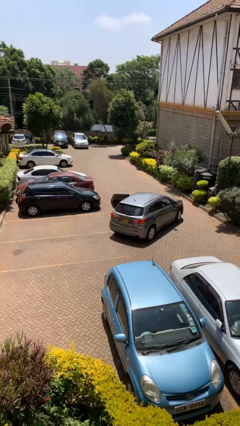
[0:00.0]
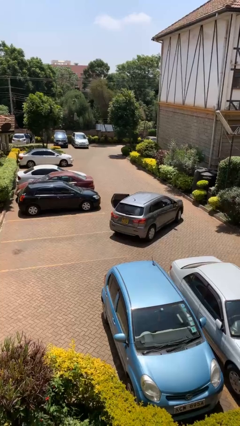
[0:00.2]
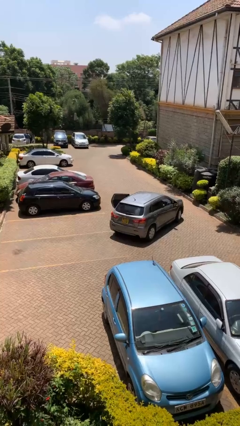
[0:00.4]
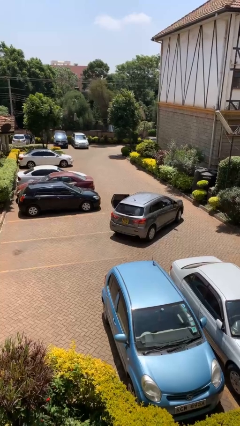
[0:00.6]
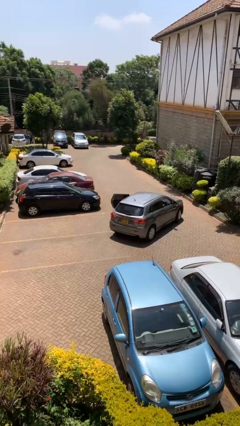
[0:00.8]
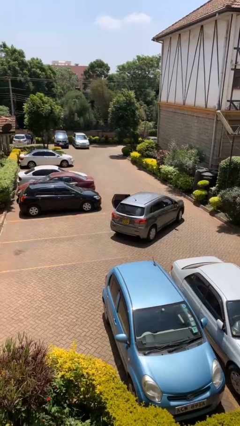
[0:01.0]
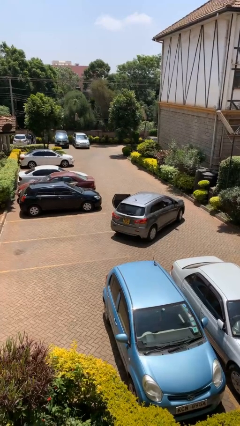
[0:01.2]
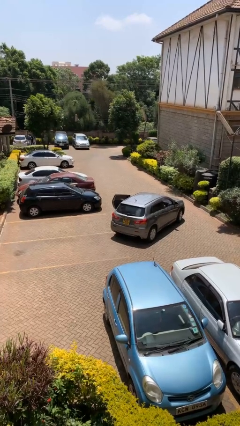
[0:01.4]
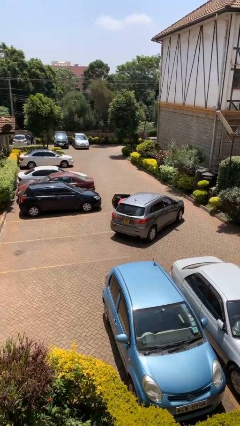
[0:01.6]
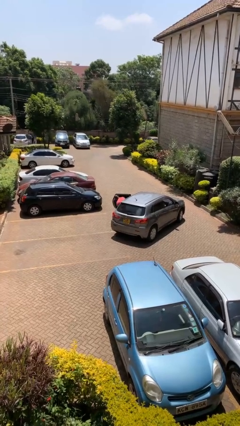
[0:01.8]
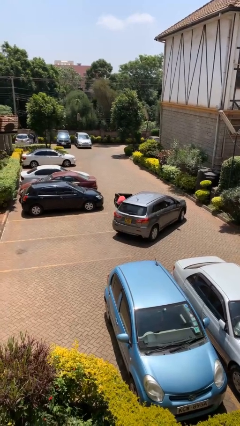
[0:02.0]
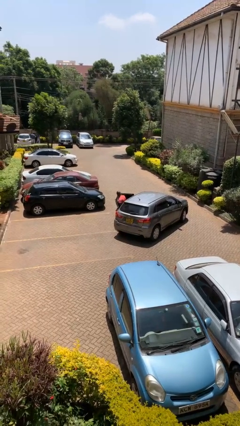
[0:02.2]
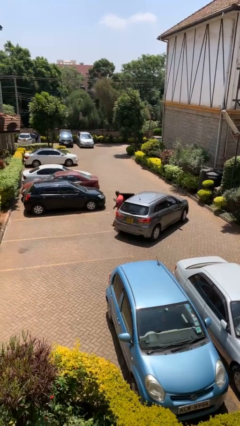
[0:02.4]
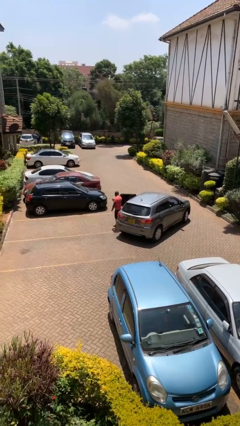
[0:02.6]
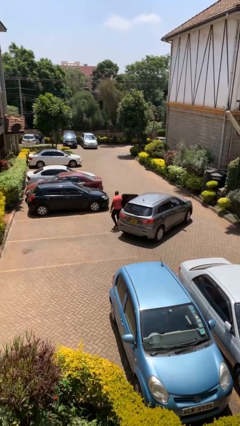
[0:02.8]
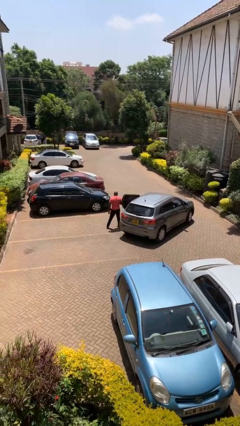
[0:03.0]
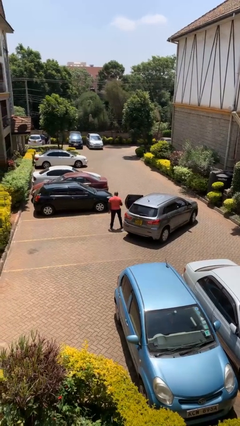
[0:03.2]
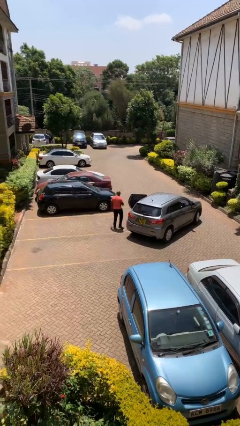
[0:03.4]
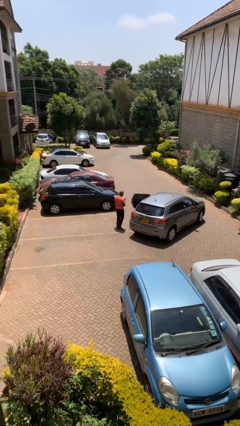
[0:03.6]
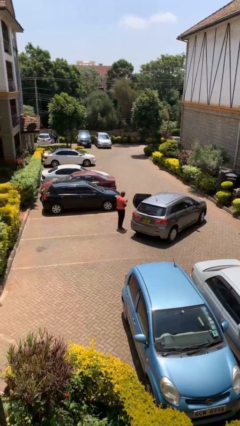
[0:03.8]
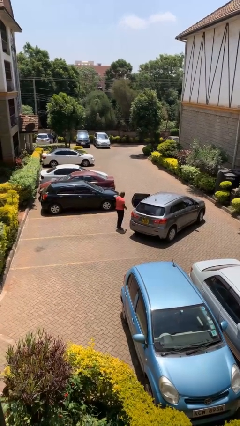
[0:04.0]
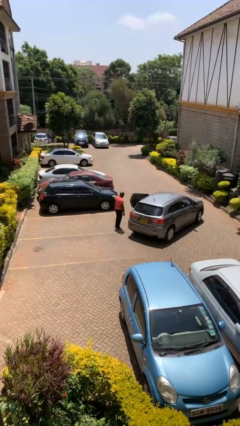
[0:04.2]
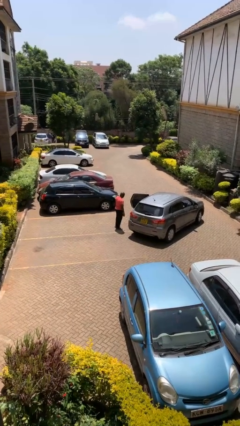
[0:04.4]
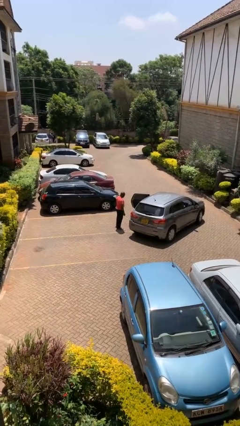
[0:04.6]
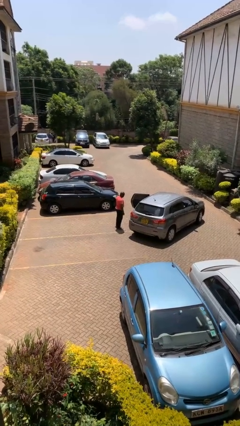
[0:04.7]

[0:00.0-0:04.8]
person exits car

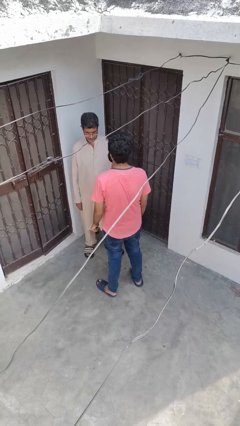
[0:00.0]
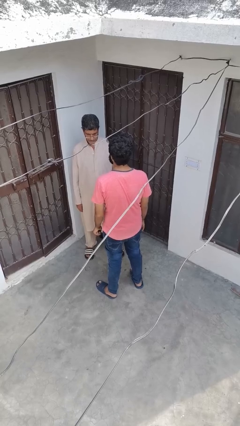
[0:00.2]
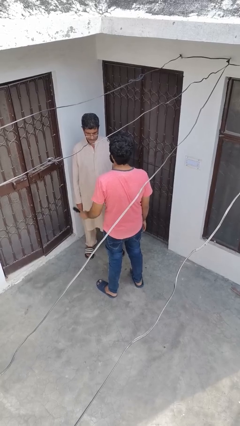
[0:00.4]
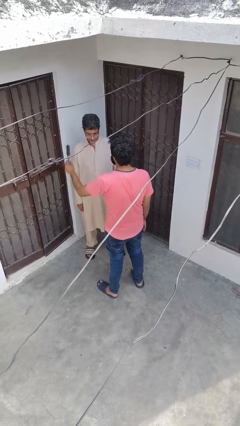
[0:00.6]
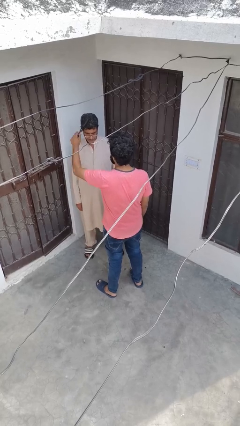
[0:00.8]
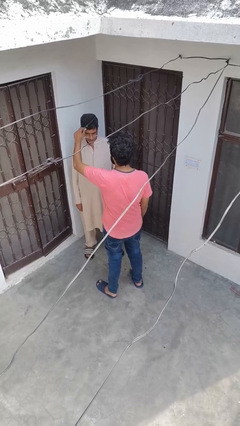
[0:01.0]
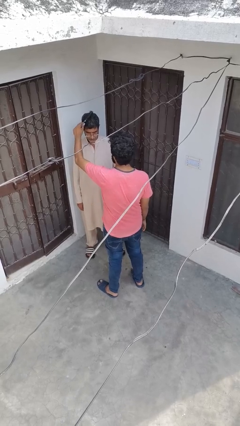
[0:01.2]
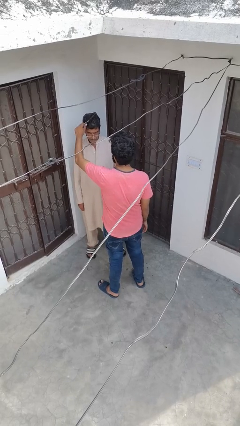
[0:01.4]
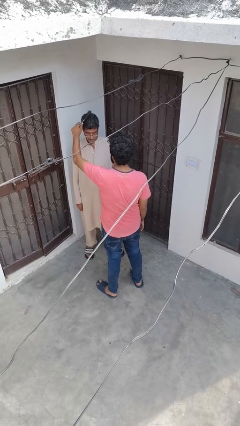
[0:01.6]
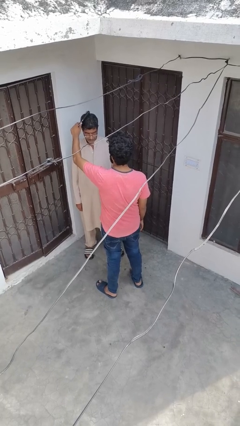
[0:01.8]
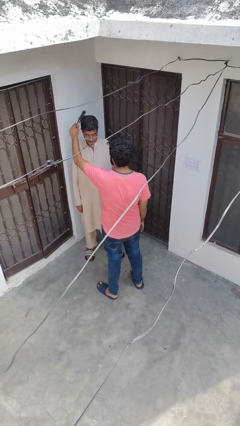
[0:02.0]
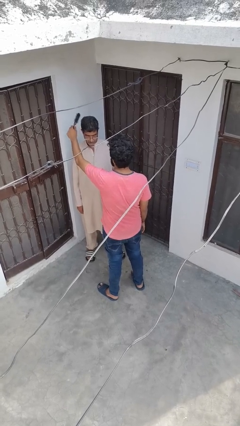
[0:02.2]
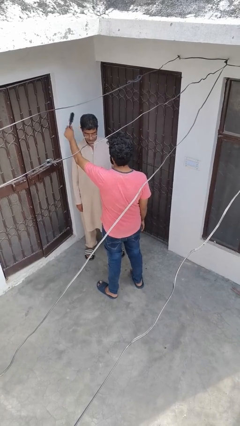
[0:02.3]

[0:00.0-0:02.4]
person brushes hair of person

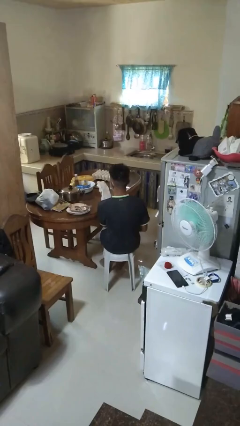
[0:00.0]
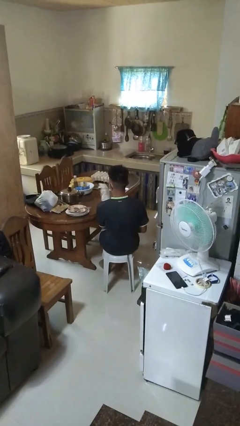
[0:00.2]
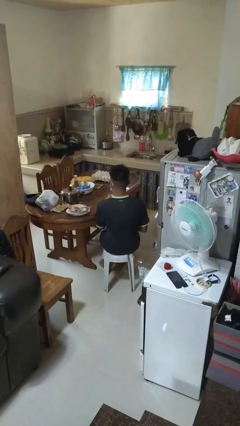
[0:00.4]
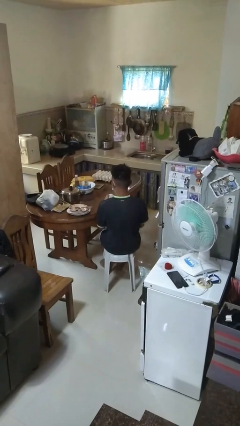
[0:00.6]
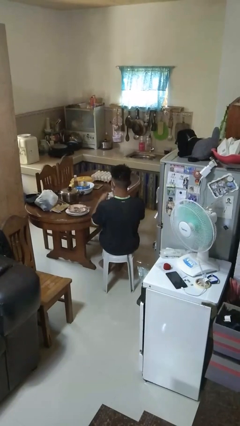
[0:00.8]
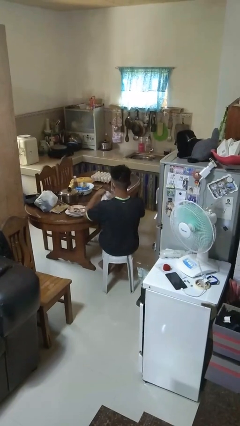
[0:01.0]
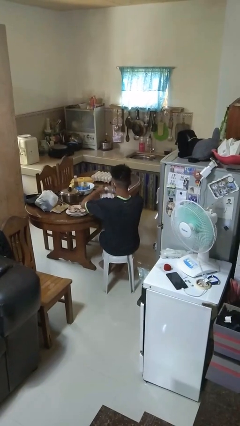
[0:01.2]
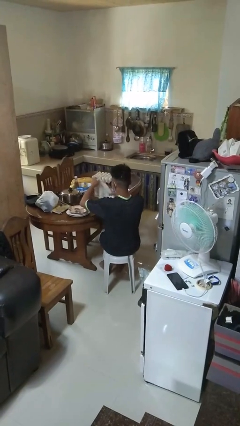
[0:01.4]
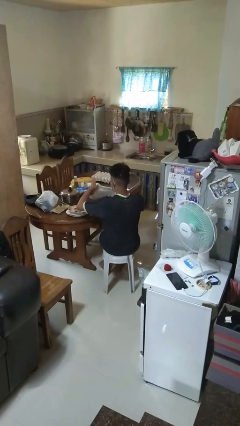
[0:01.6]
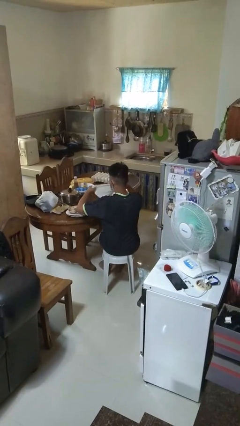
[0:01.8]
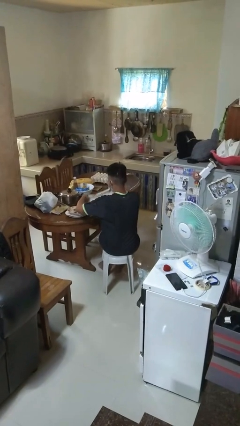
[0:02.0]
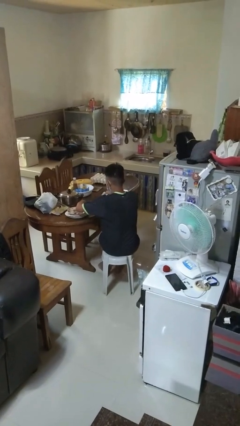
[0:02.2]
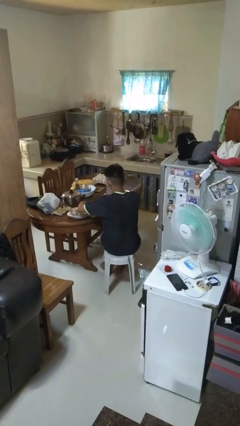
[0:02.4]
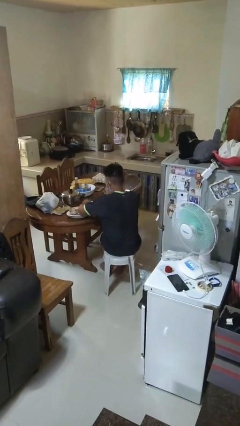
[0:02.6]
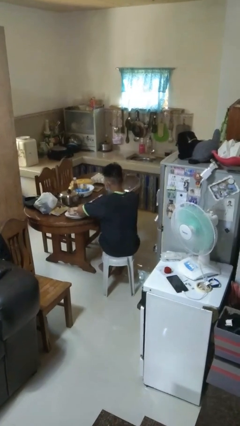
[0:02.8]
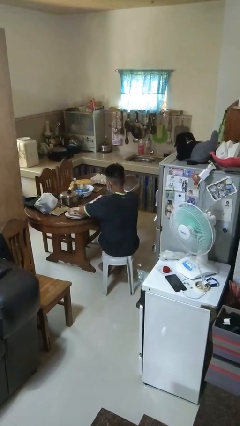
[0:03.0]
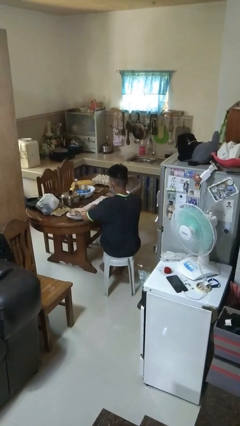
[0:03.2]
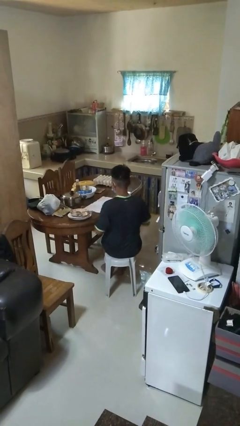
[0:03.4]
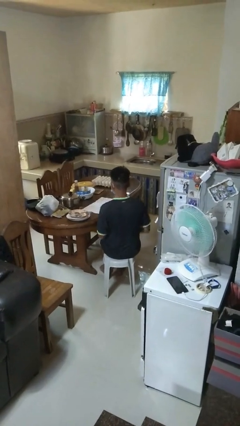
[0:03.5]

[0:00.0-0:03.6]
person spreads tablecloth

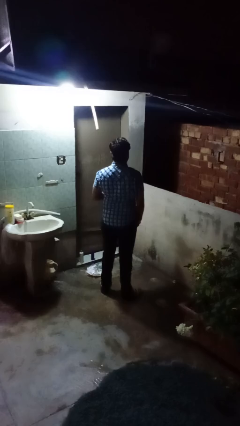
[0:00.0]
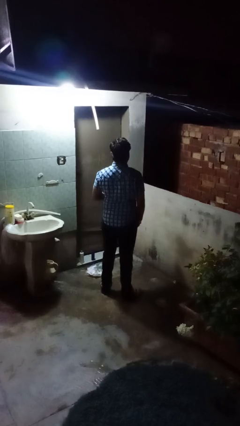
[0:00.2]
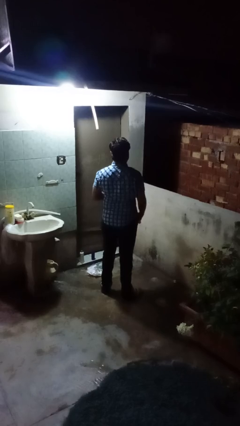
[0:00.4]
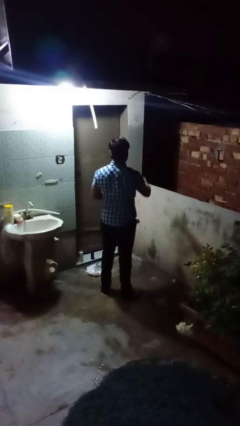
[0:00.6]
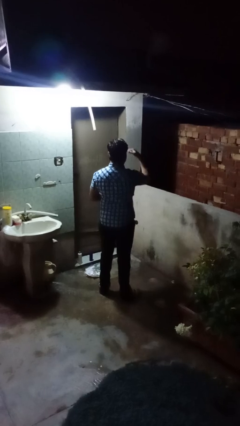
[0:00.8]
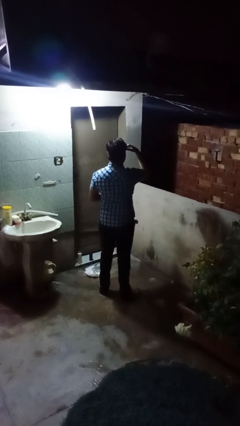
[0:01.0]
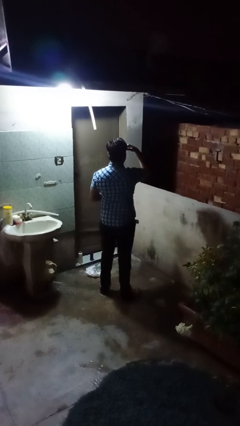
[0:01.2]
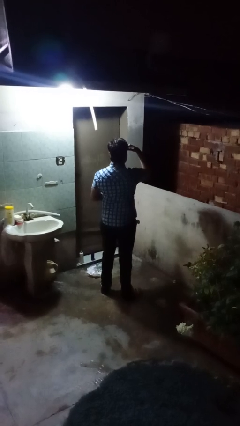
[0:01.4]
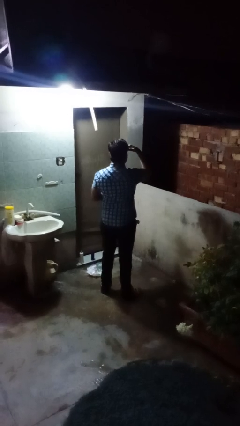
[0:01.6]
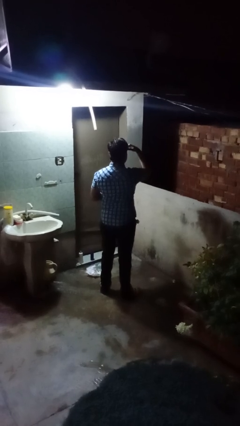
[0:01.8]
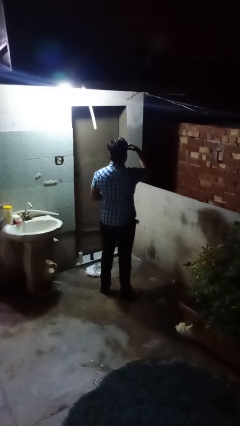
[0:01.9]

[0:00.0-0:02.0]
person shades eyes

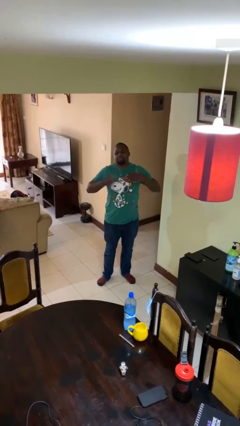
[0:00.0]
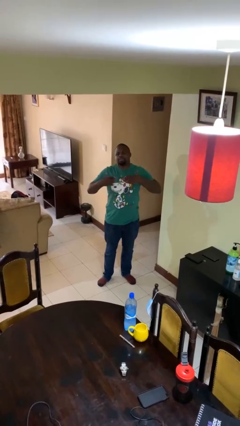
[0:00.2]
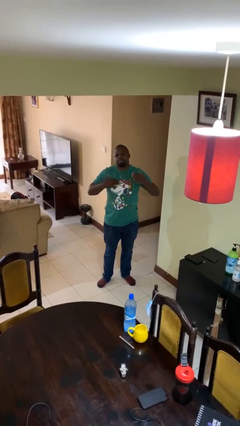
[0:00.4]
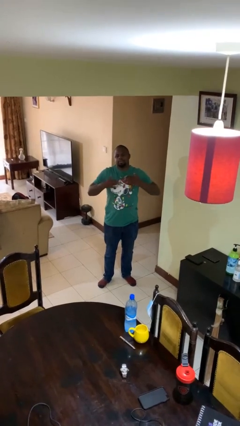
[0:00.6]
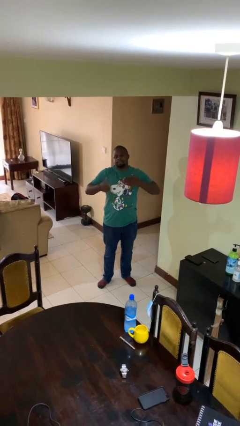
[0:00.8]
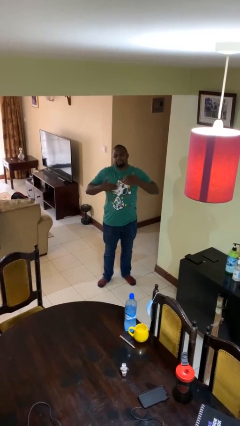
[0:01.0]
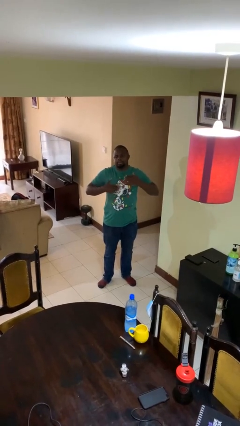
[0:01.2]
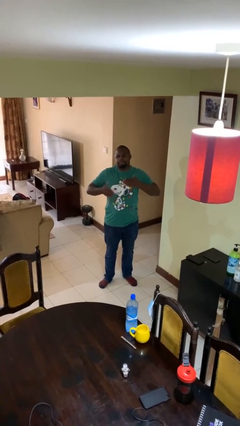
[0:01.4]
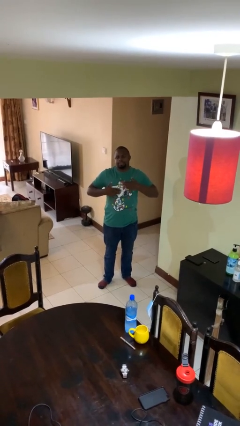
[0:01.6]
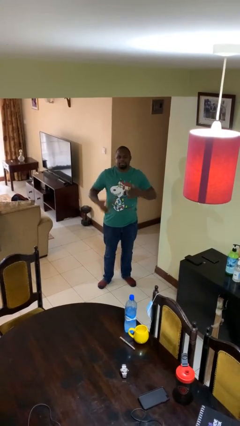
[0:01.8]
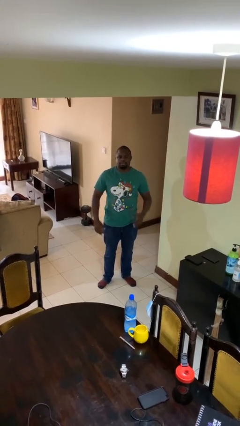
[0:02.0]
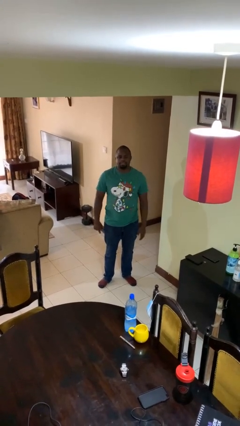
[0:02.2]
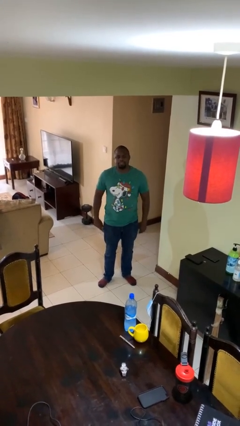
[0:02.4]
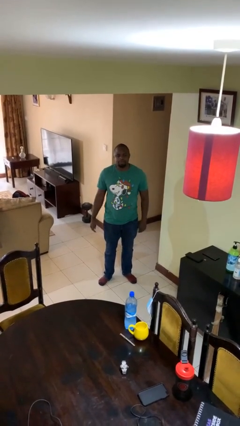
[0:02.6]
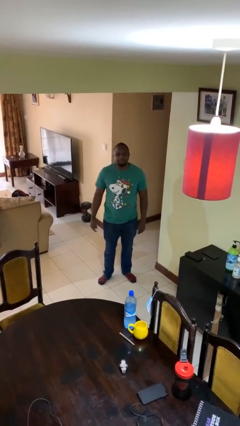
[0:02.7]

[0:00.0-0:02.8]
person drums on chest

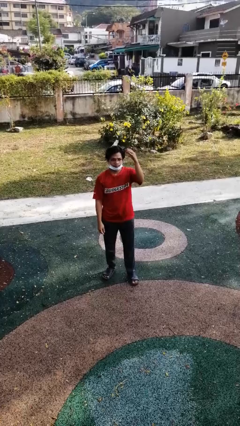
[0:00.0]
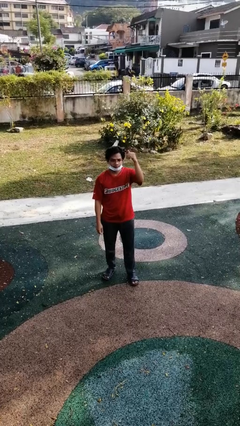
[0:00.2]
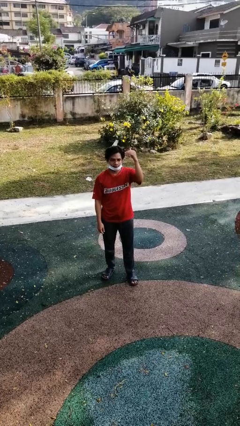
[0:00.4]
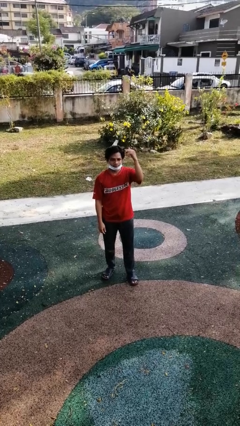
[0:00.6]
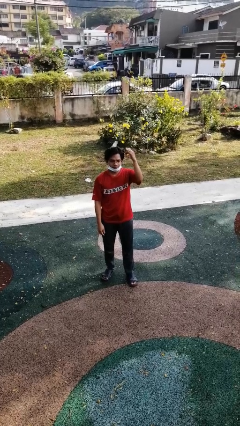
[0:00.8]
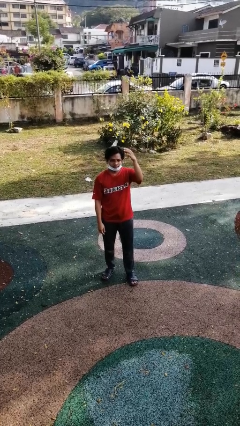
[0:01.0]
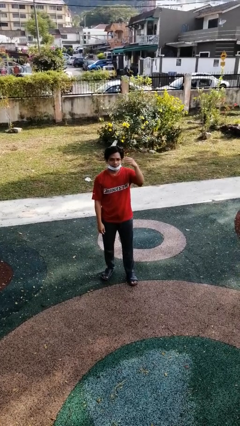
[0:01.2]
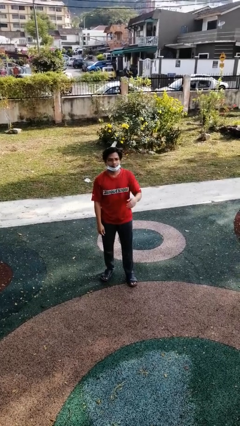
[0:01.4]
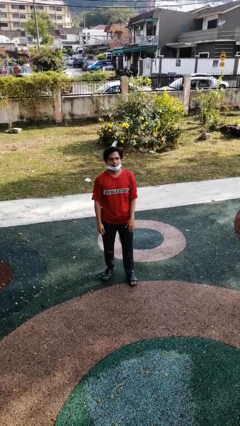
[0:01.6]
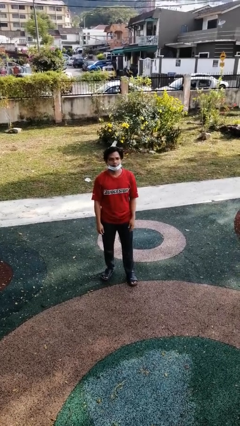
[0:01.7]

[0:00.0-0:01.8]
person gestures come here
